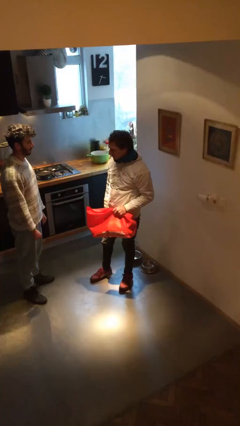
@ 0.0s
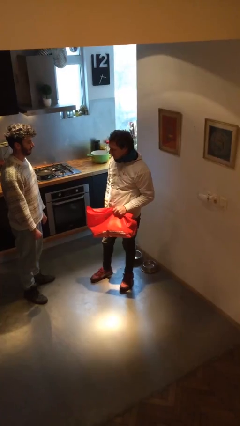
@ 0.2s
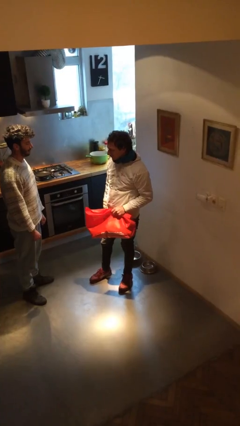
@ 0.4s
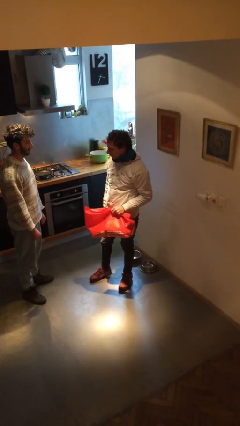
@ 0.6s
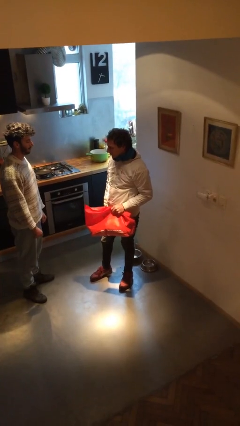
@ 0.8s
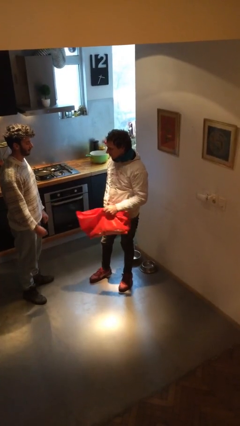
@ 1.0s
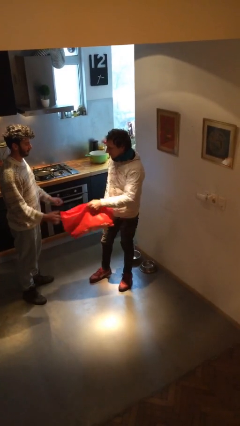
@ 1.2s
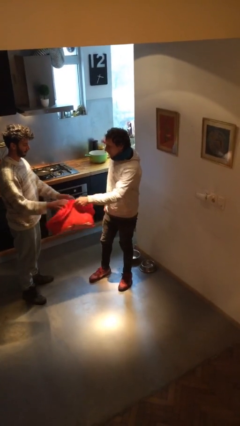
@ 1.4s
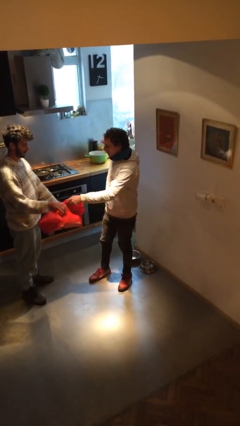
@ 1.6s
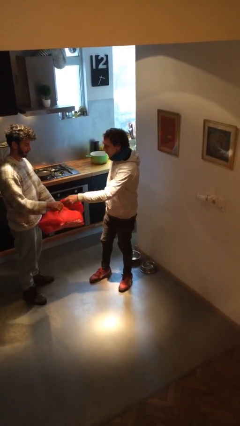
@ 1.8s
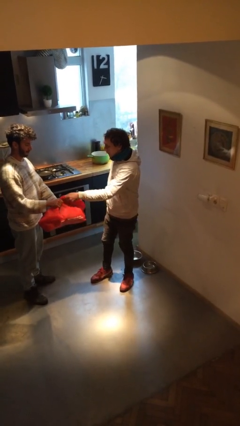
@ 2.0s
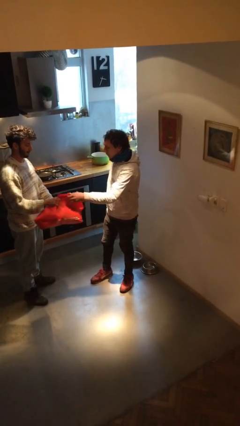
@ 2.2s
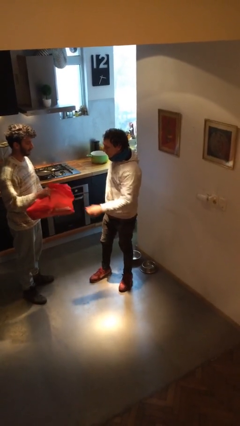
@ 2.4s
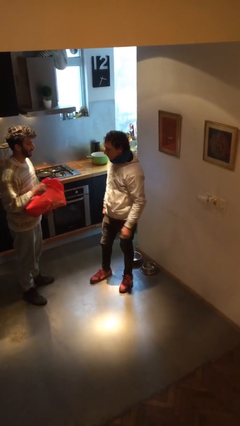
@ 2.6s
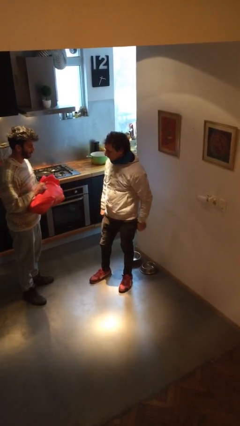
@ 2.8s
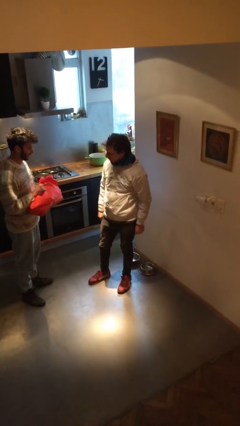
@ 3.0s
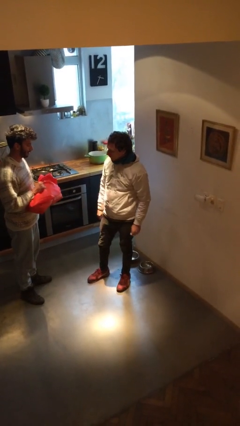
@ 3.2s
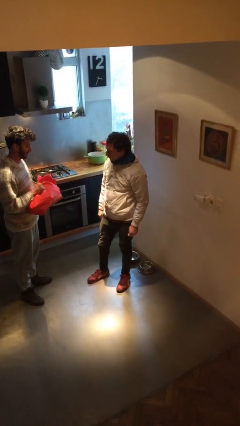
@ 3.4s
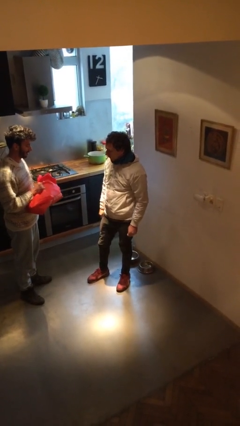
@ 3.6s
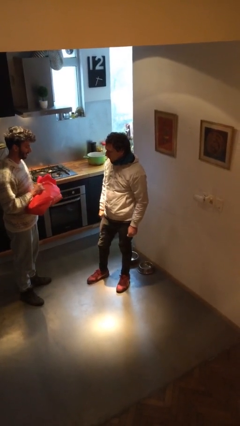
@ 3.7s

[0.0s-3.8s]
person transfers object to person

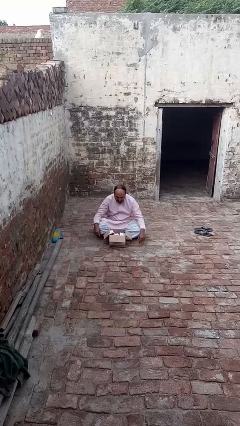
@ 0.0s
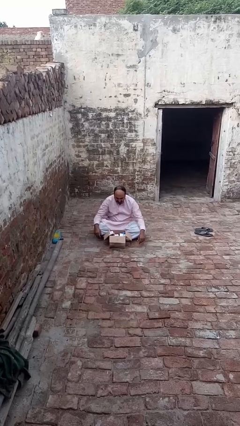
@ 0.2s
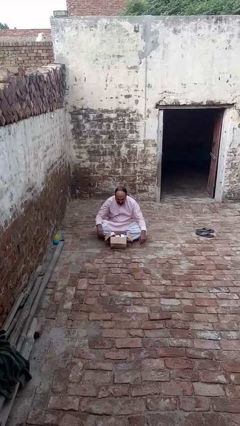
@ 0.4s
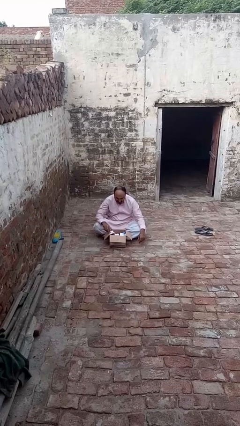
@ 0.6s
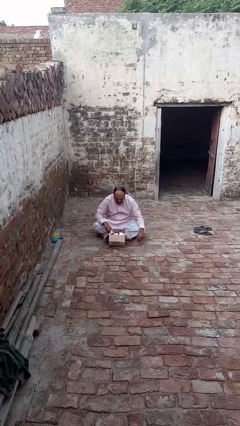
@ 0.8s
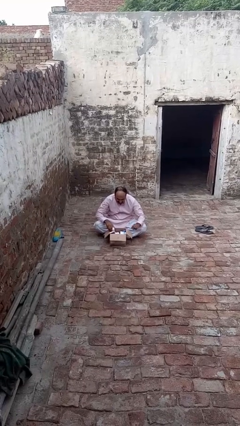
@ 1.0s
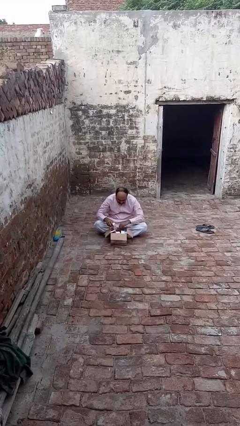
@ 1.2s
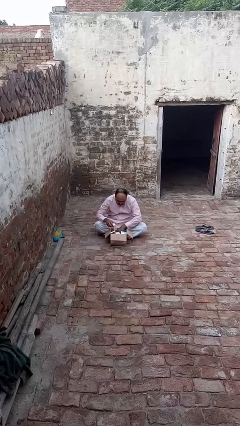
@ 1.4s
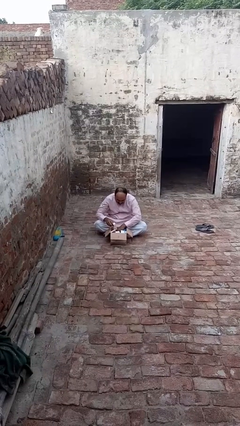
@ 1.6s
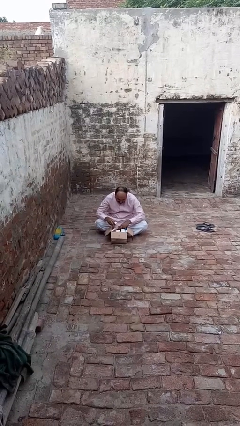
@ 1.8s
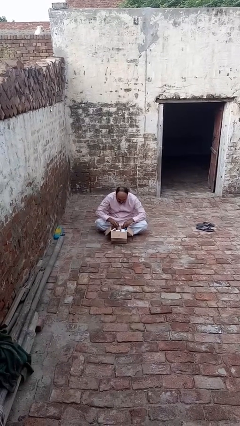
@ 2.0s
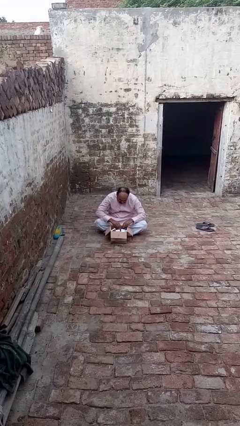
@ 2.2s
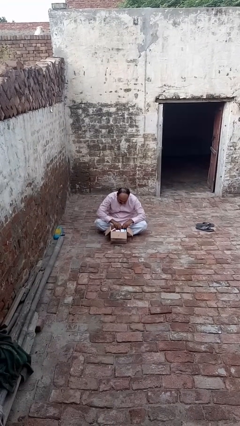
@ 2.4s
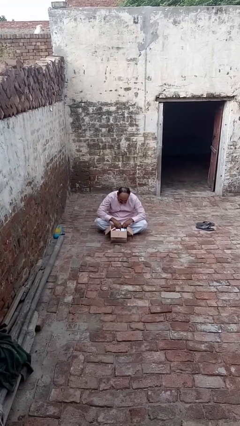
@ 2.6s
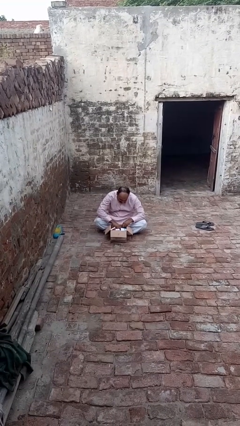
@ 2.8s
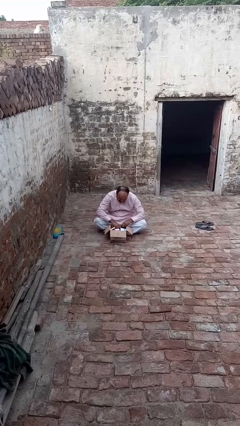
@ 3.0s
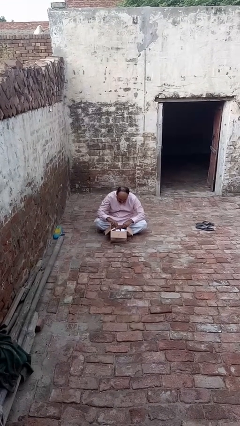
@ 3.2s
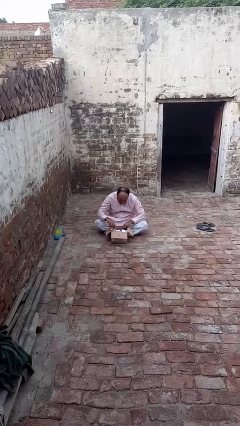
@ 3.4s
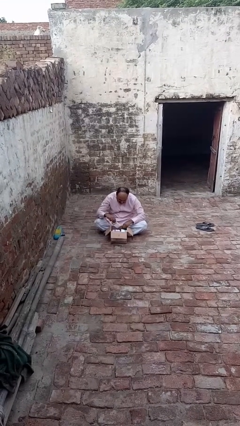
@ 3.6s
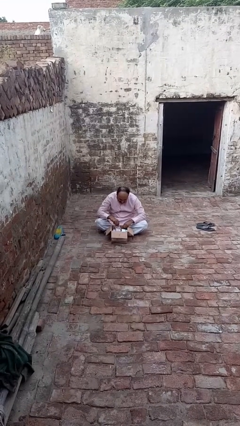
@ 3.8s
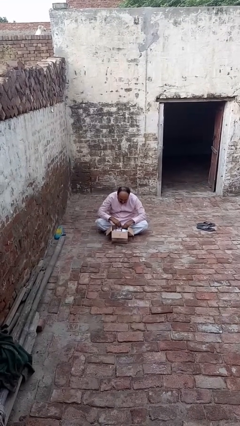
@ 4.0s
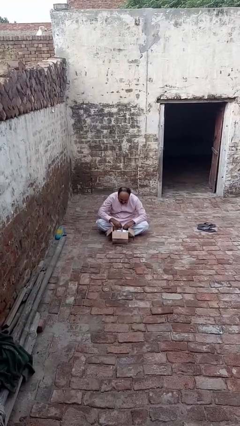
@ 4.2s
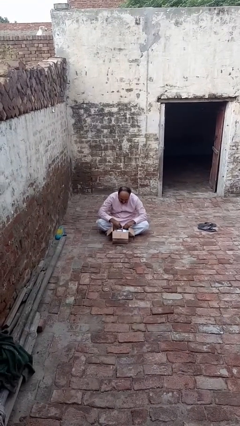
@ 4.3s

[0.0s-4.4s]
person searches in box

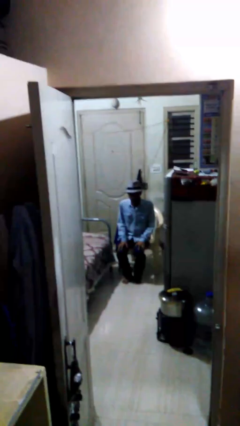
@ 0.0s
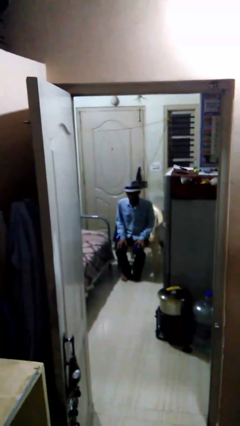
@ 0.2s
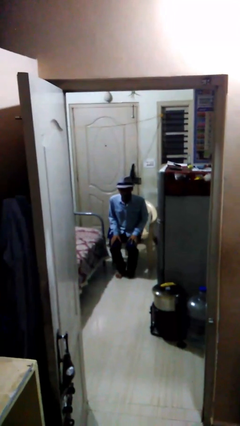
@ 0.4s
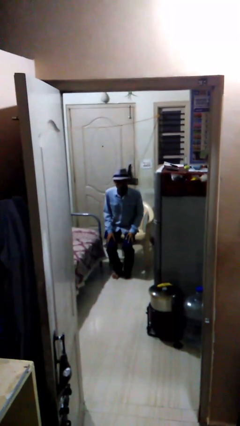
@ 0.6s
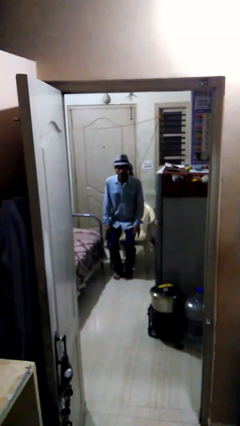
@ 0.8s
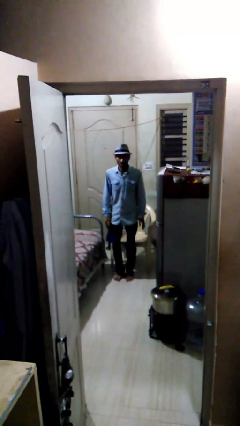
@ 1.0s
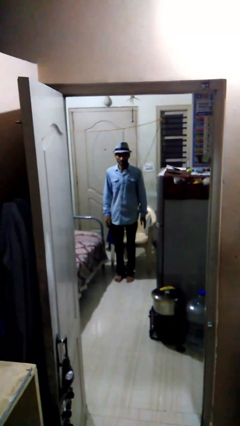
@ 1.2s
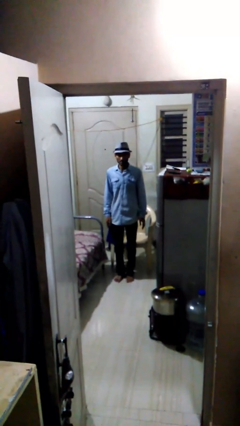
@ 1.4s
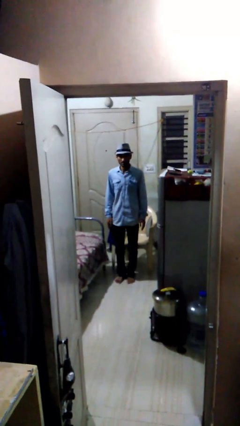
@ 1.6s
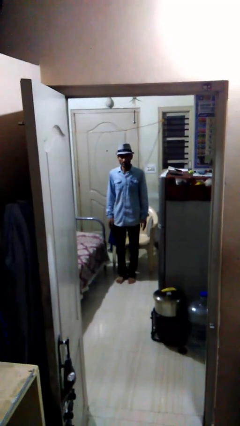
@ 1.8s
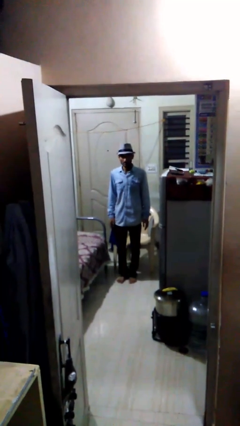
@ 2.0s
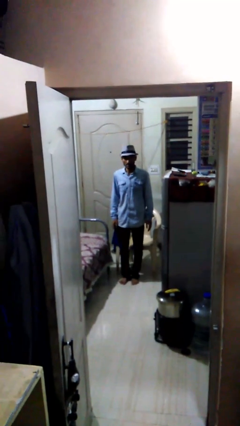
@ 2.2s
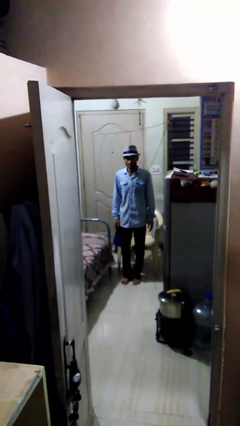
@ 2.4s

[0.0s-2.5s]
person stands up

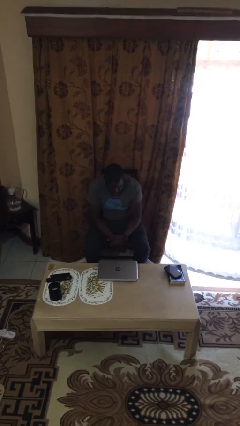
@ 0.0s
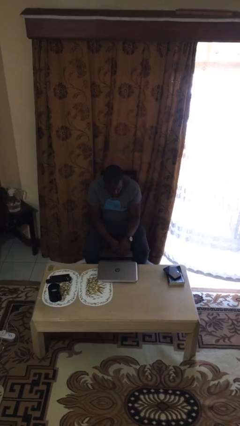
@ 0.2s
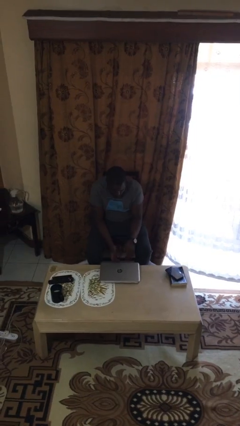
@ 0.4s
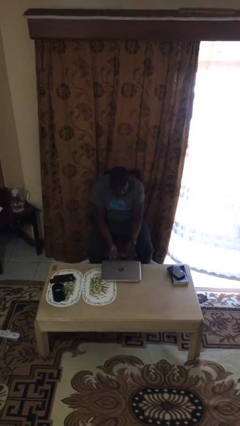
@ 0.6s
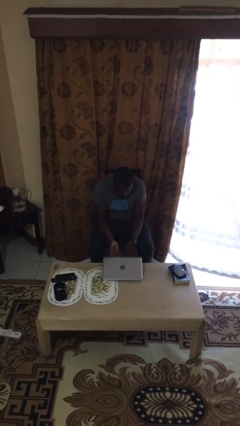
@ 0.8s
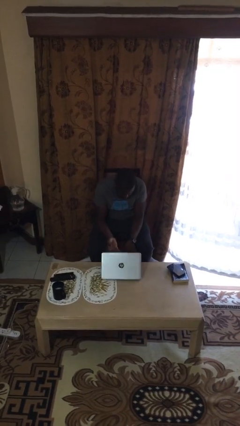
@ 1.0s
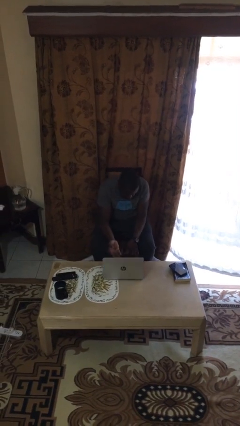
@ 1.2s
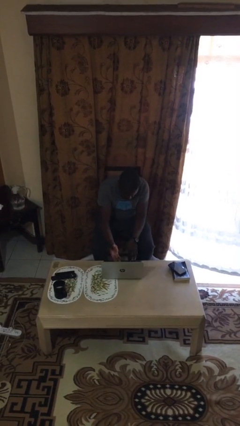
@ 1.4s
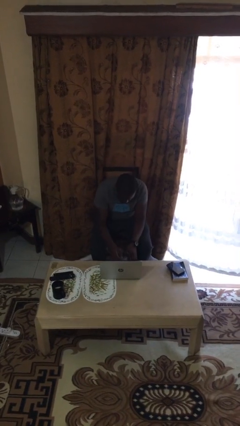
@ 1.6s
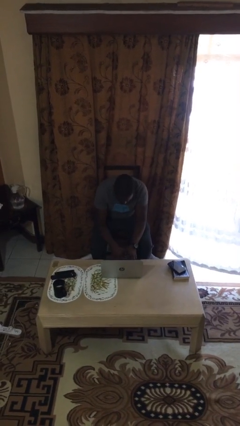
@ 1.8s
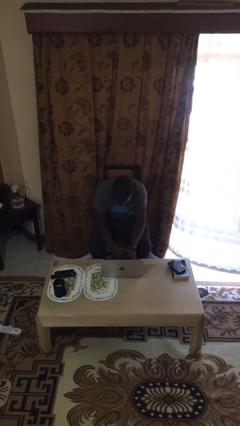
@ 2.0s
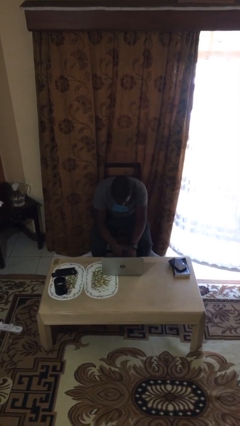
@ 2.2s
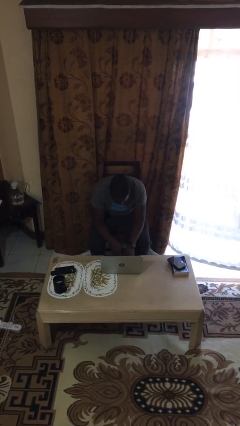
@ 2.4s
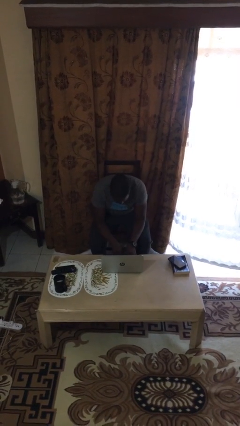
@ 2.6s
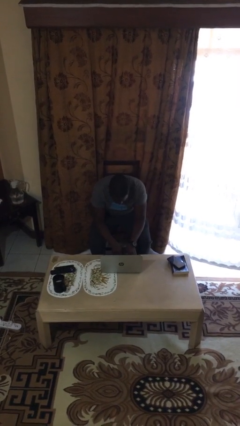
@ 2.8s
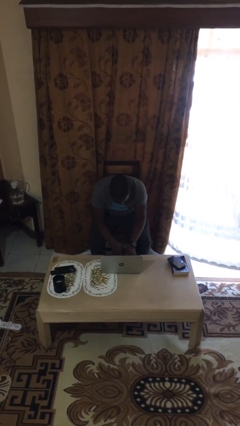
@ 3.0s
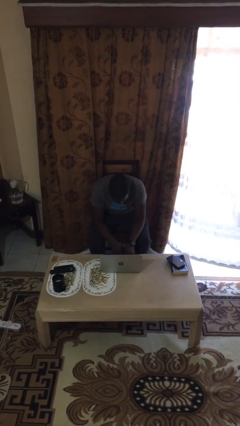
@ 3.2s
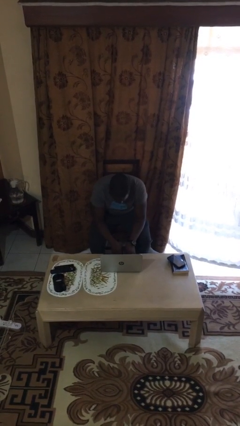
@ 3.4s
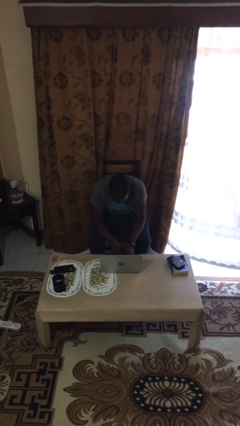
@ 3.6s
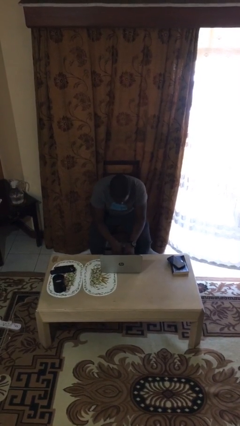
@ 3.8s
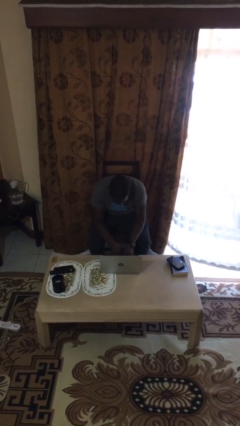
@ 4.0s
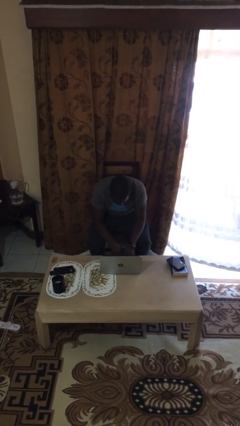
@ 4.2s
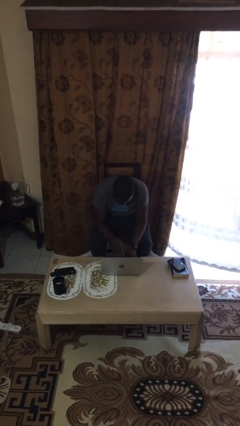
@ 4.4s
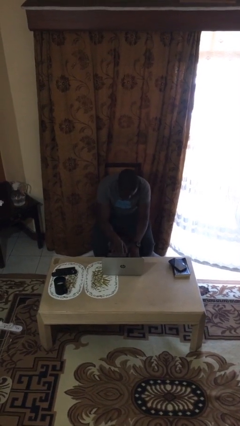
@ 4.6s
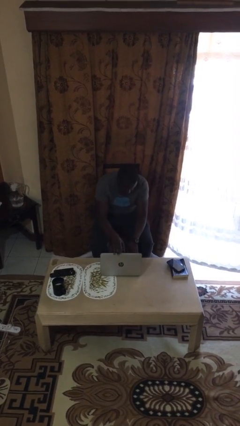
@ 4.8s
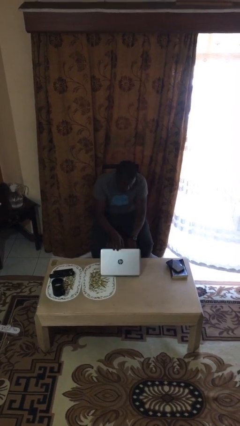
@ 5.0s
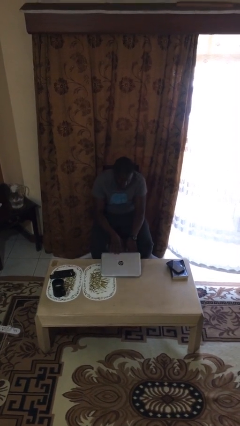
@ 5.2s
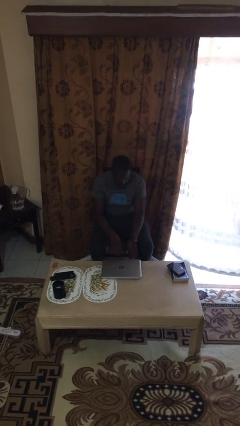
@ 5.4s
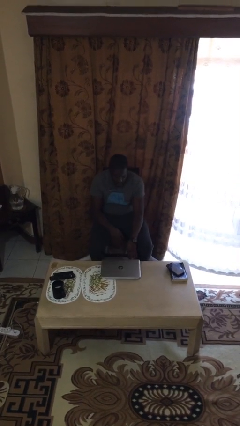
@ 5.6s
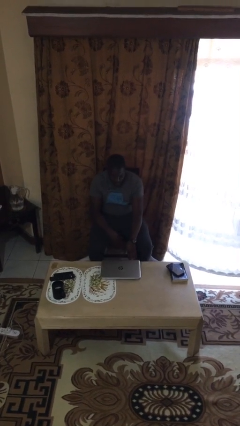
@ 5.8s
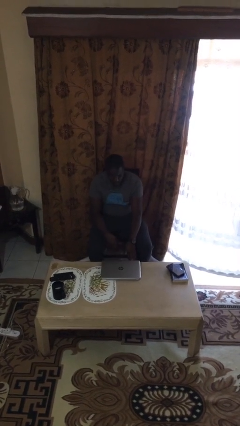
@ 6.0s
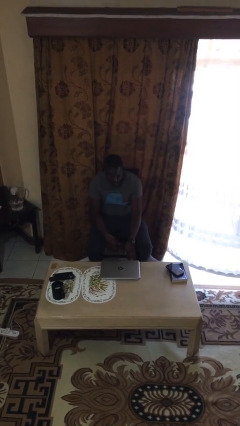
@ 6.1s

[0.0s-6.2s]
person interacts with laptop

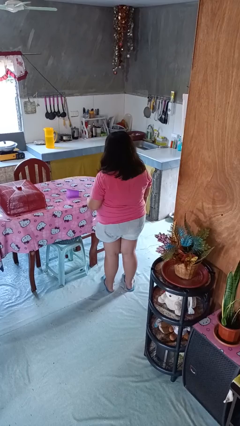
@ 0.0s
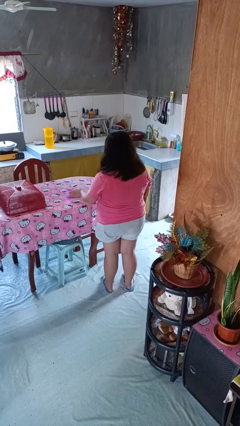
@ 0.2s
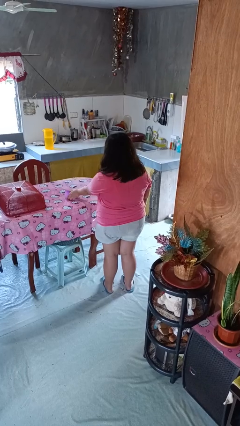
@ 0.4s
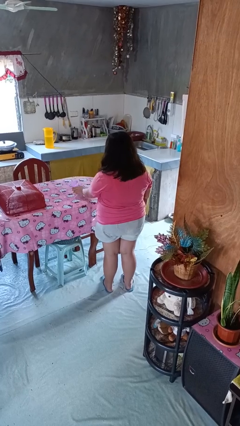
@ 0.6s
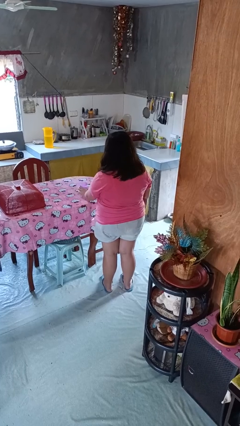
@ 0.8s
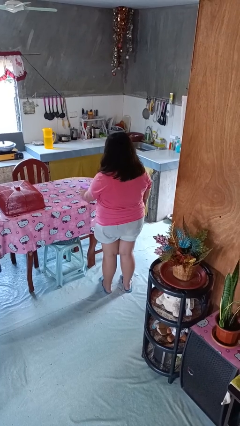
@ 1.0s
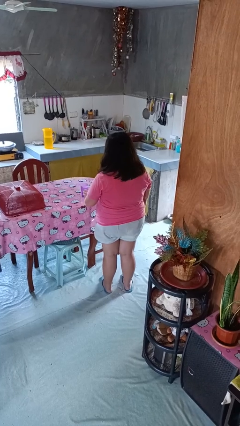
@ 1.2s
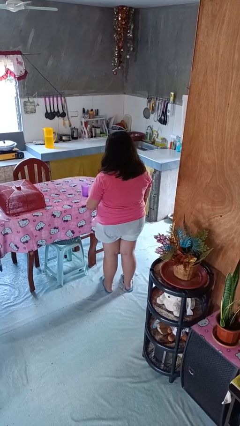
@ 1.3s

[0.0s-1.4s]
person sets upright glass
